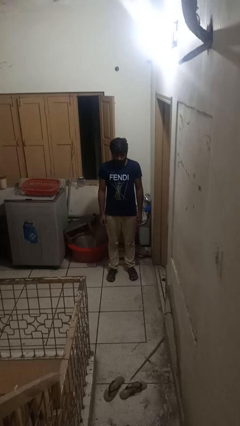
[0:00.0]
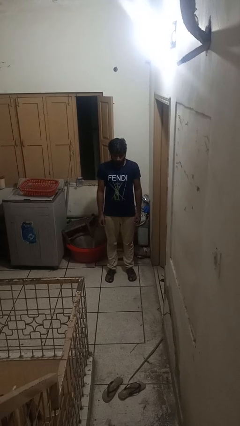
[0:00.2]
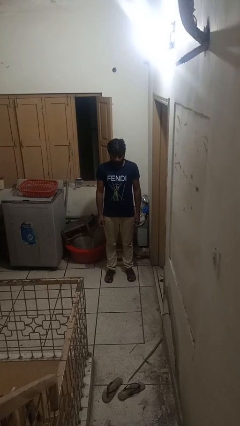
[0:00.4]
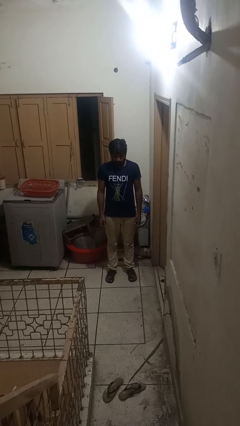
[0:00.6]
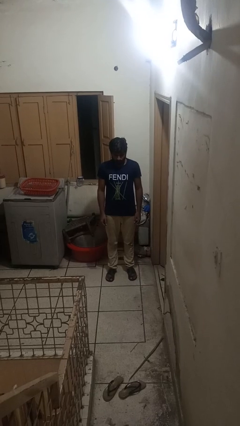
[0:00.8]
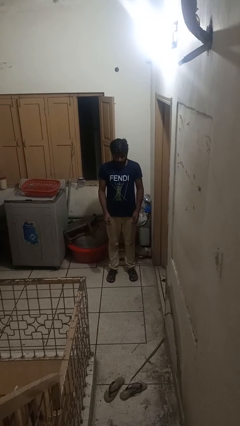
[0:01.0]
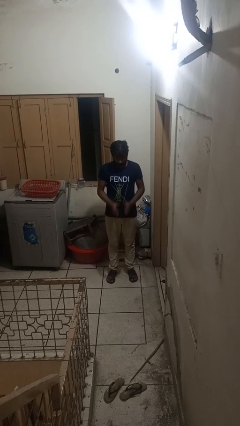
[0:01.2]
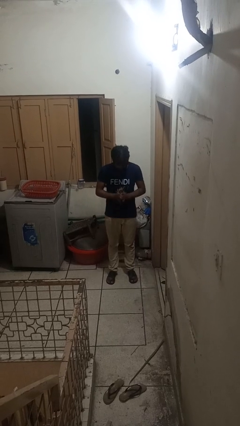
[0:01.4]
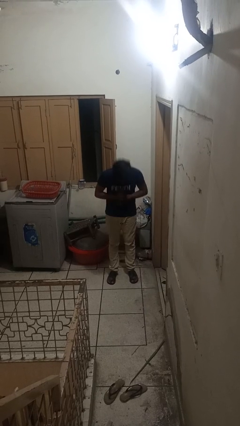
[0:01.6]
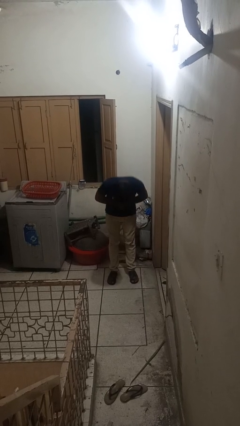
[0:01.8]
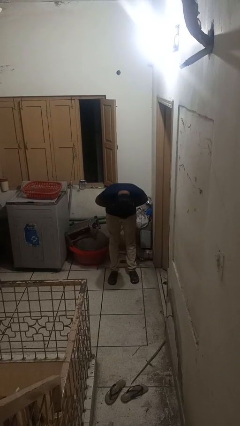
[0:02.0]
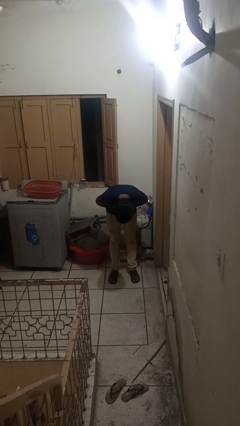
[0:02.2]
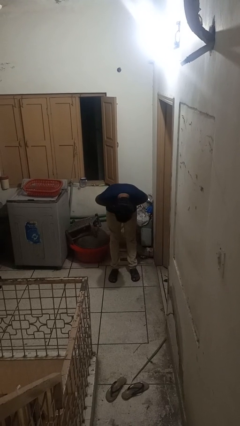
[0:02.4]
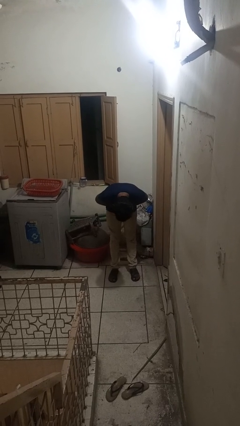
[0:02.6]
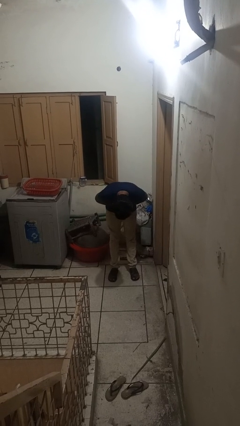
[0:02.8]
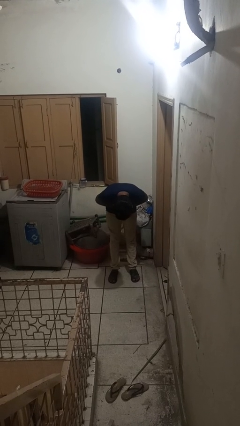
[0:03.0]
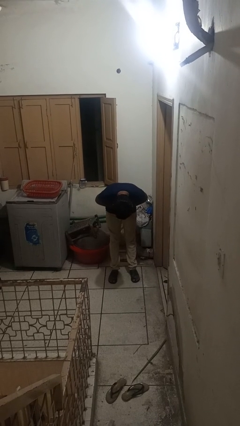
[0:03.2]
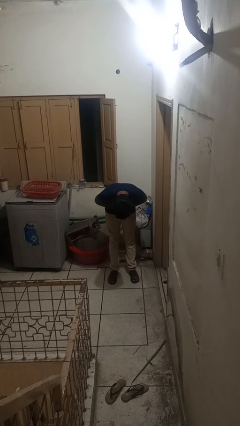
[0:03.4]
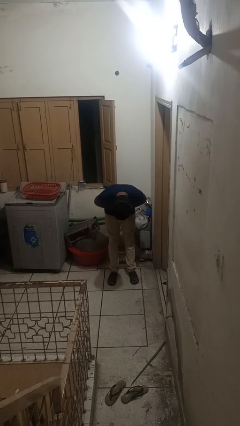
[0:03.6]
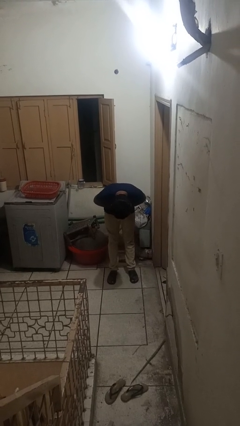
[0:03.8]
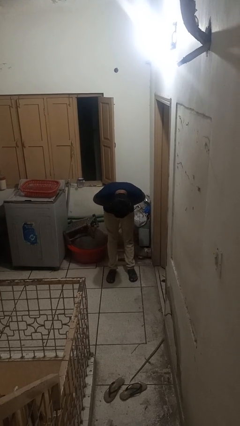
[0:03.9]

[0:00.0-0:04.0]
person bows

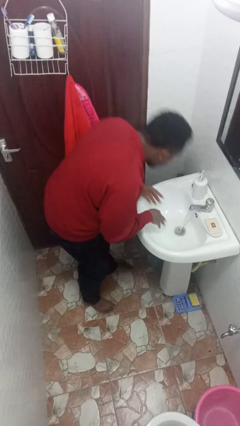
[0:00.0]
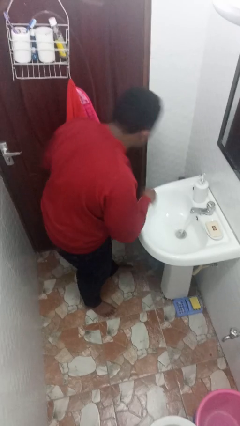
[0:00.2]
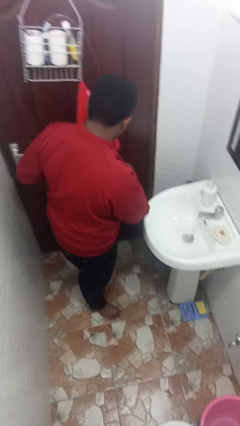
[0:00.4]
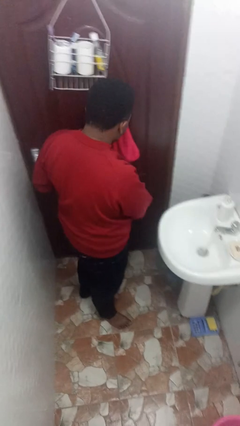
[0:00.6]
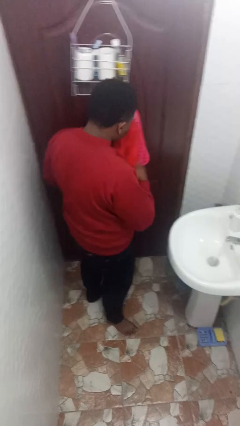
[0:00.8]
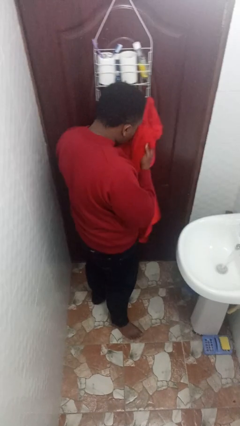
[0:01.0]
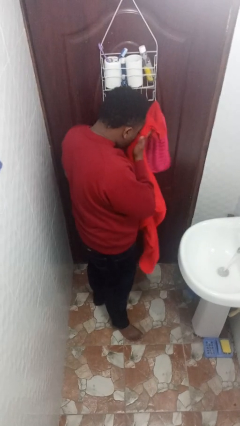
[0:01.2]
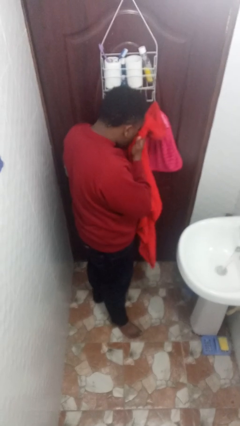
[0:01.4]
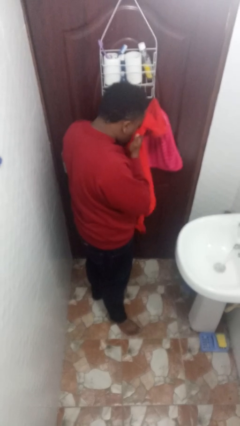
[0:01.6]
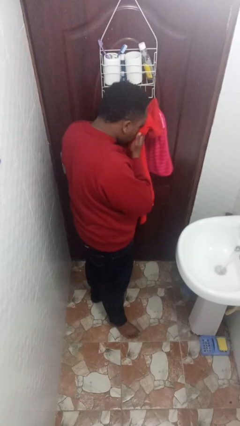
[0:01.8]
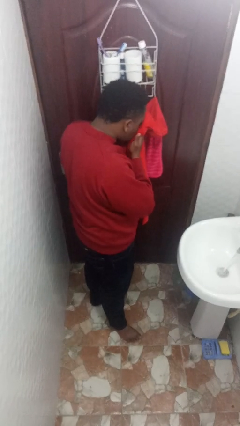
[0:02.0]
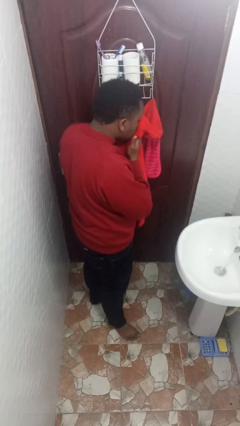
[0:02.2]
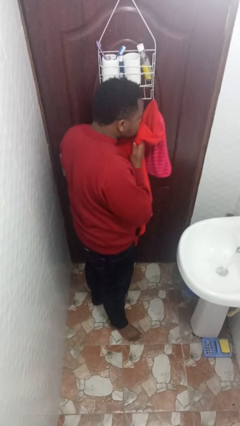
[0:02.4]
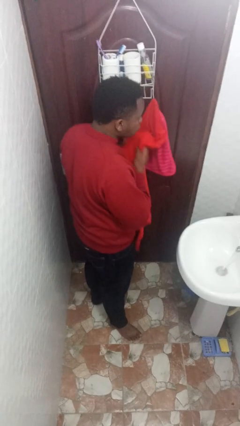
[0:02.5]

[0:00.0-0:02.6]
person dries face with towel

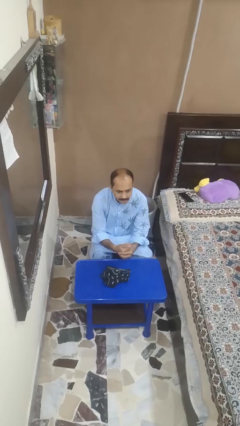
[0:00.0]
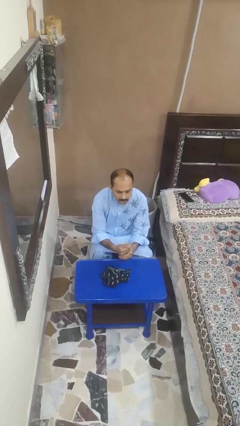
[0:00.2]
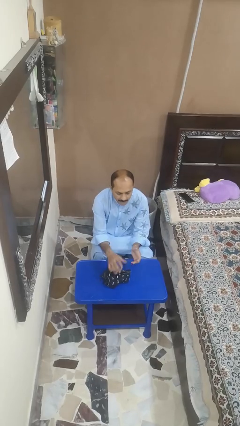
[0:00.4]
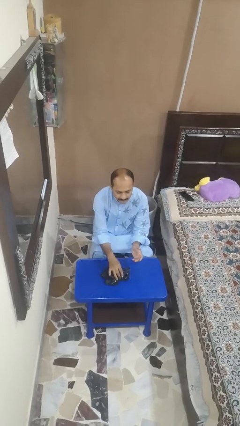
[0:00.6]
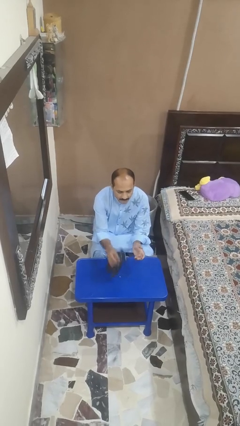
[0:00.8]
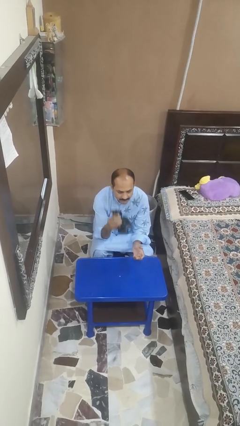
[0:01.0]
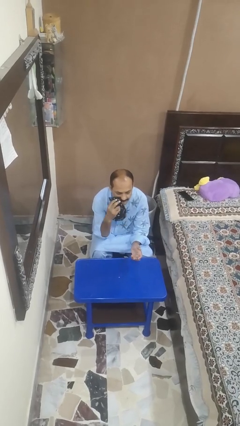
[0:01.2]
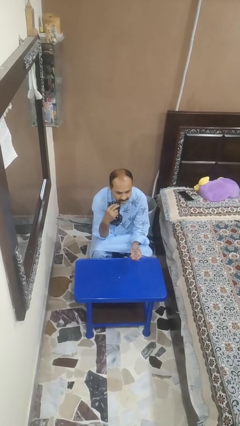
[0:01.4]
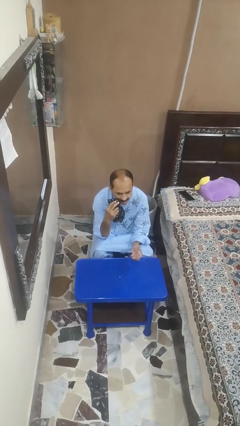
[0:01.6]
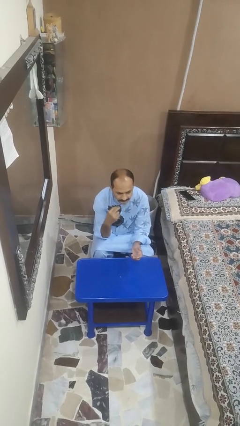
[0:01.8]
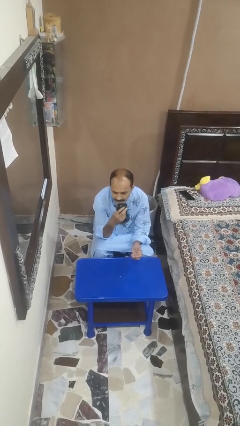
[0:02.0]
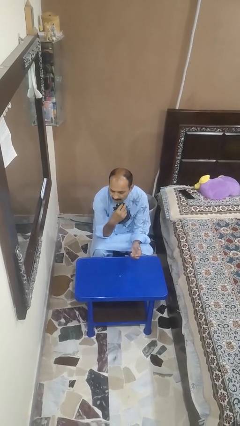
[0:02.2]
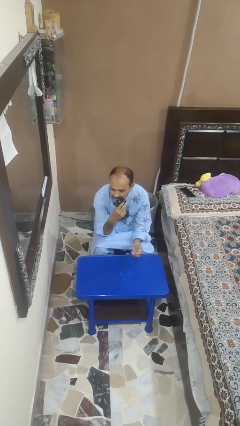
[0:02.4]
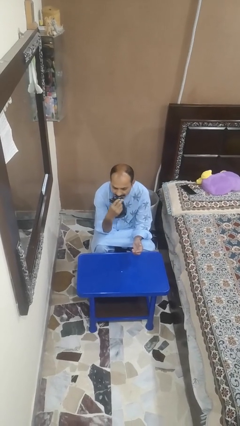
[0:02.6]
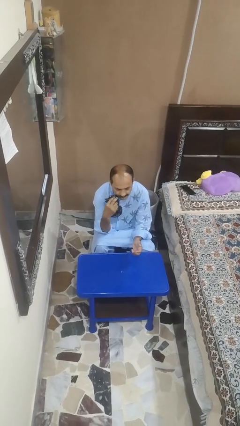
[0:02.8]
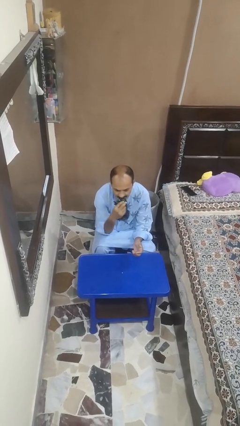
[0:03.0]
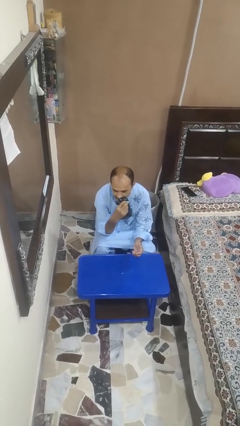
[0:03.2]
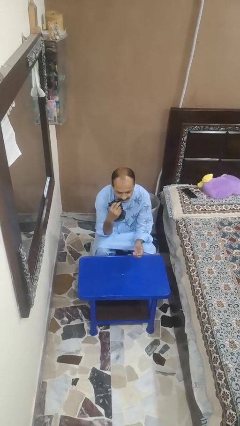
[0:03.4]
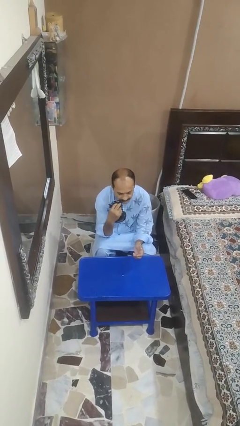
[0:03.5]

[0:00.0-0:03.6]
person wipes mouth with napkin

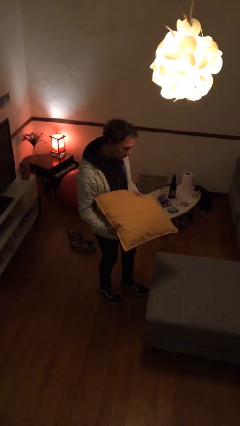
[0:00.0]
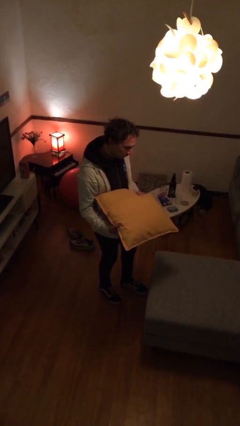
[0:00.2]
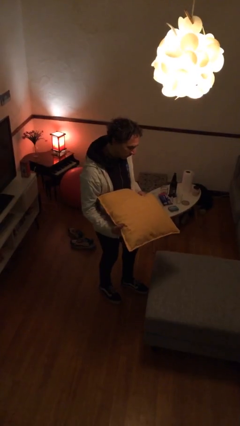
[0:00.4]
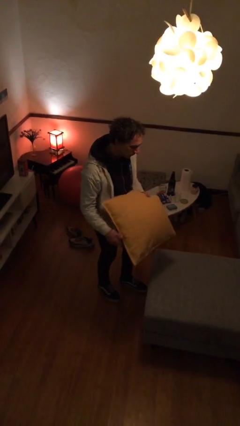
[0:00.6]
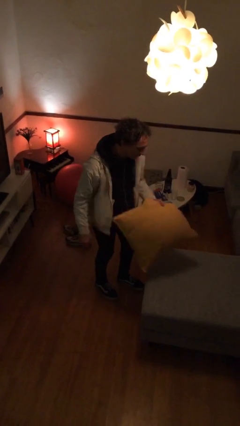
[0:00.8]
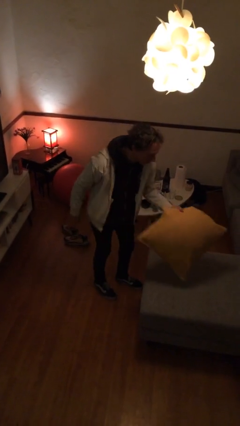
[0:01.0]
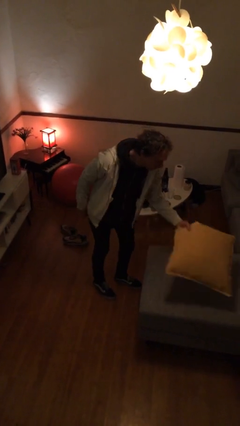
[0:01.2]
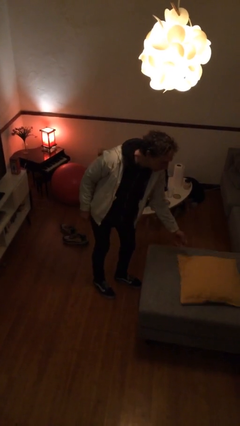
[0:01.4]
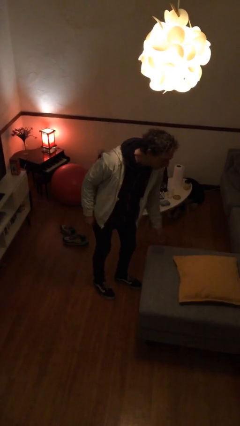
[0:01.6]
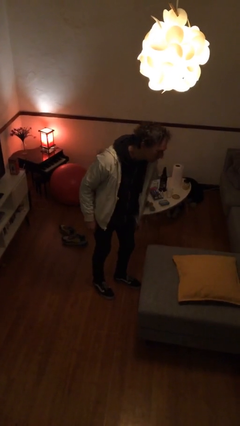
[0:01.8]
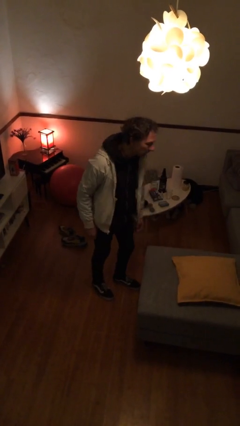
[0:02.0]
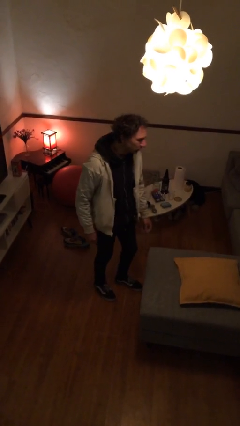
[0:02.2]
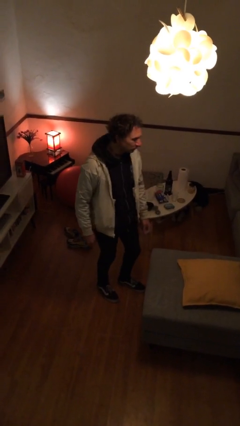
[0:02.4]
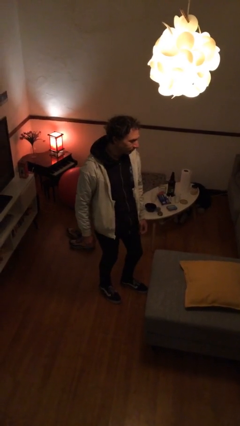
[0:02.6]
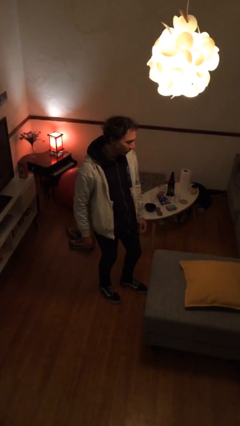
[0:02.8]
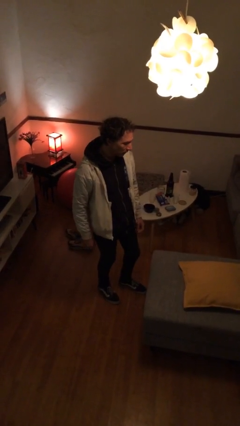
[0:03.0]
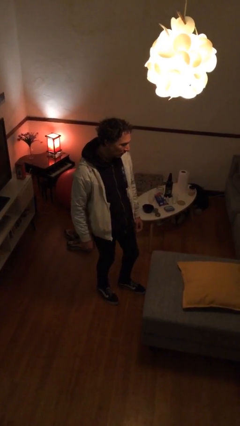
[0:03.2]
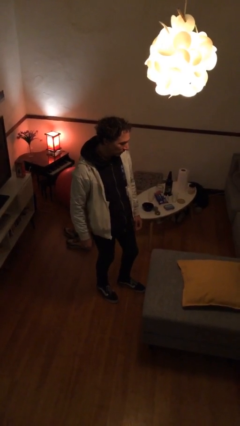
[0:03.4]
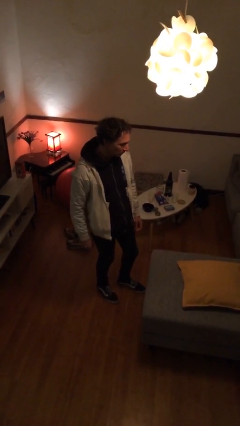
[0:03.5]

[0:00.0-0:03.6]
person puts down object on couch

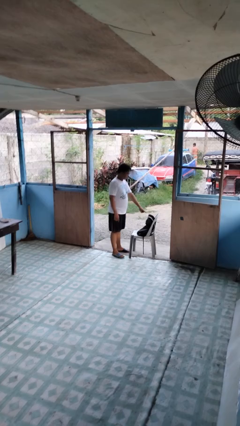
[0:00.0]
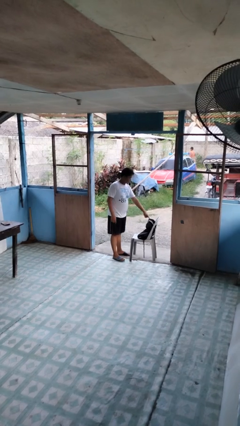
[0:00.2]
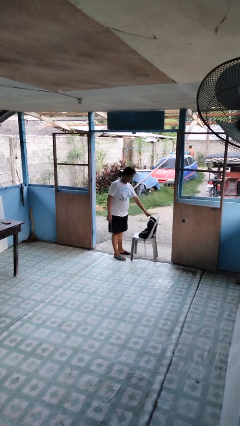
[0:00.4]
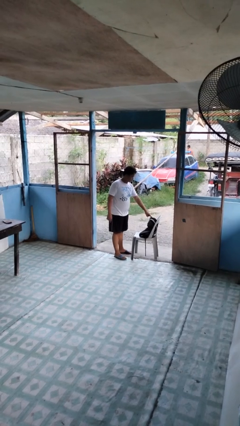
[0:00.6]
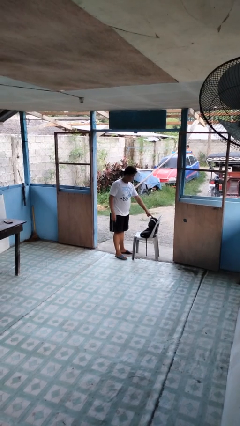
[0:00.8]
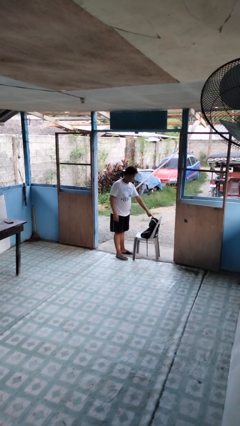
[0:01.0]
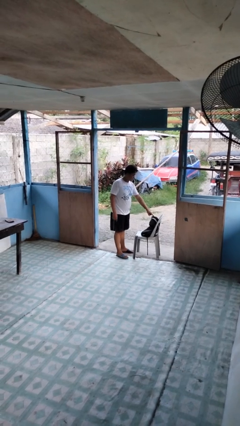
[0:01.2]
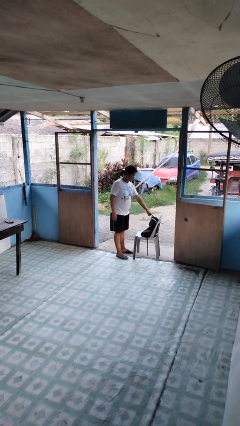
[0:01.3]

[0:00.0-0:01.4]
person taps object with finger

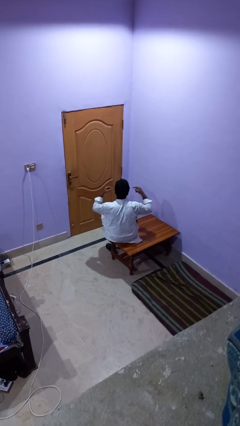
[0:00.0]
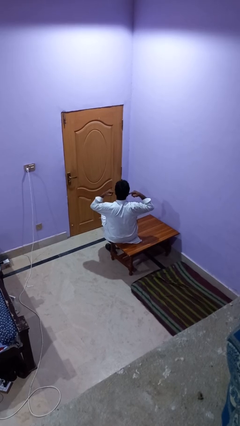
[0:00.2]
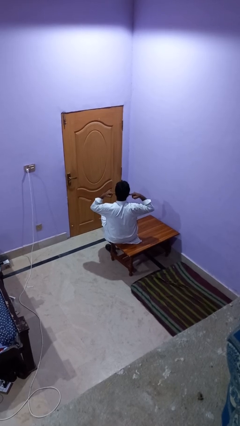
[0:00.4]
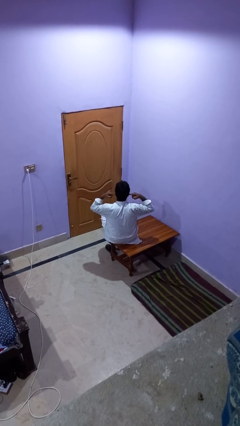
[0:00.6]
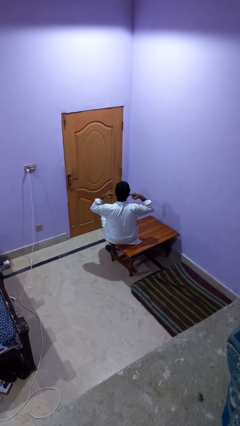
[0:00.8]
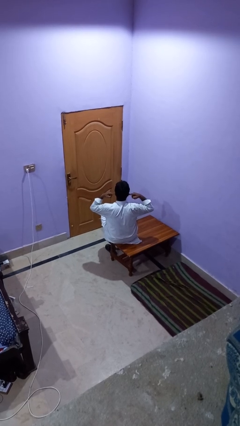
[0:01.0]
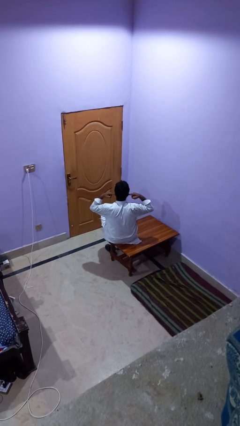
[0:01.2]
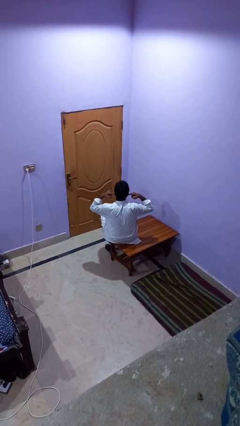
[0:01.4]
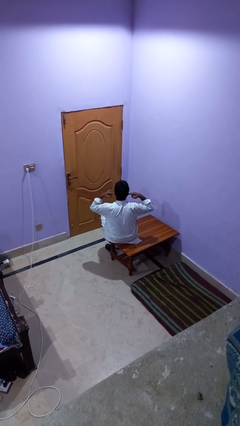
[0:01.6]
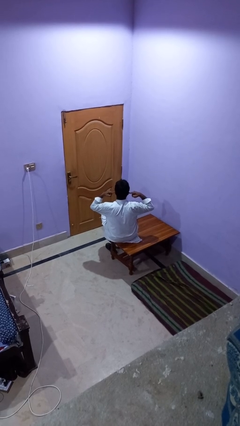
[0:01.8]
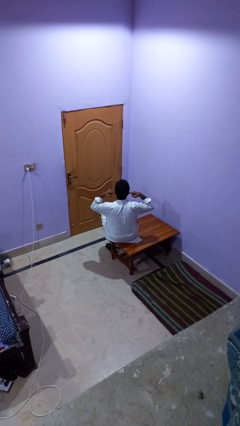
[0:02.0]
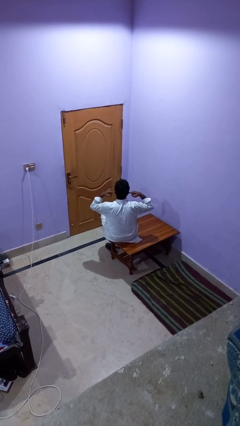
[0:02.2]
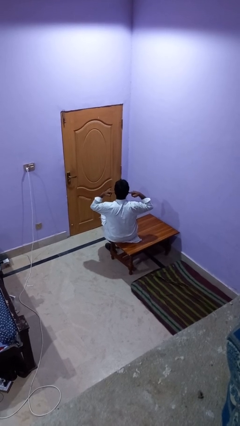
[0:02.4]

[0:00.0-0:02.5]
person puts fingers in ear
